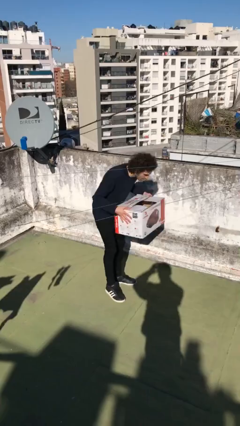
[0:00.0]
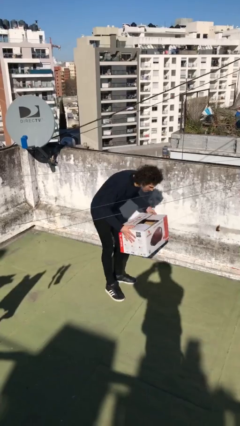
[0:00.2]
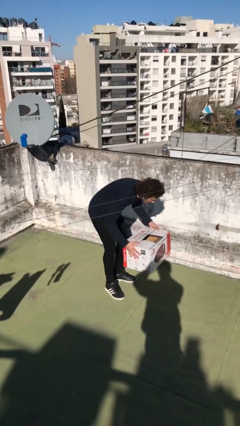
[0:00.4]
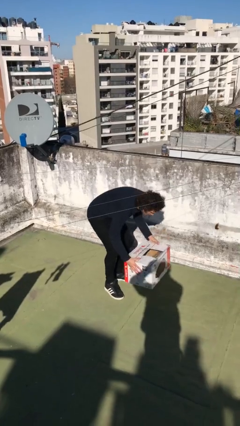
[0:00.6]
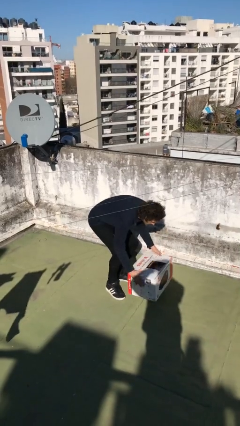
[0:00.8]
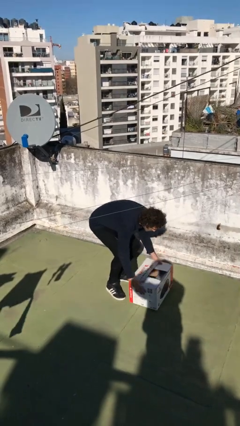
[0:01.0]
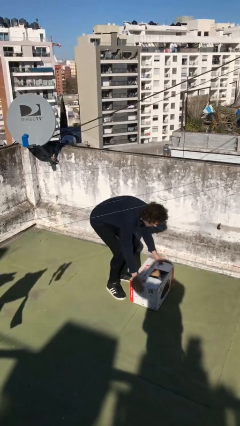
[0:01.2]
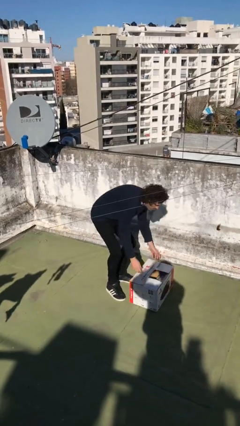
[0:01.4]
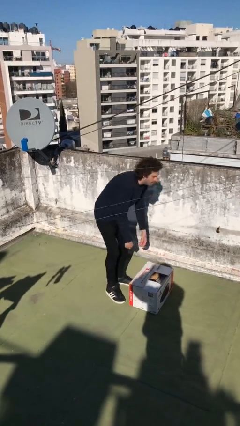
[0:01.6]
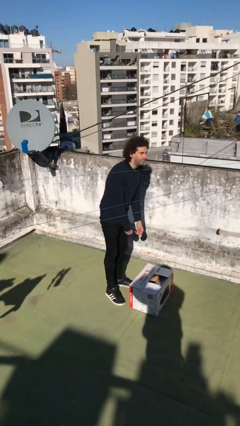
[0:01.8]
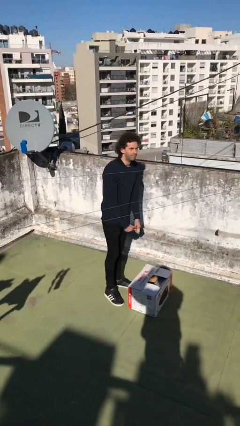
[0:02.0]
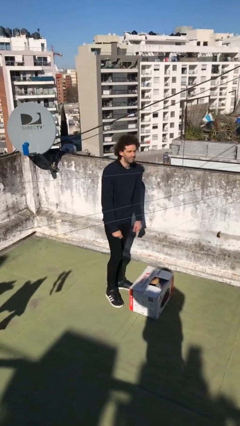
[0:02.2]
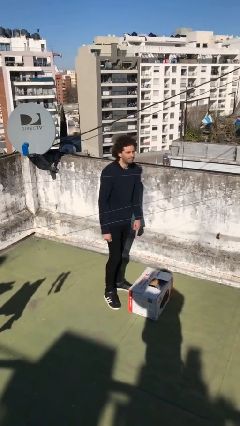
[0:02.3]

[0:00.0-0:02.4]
person puts down object on floor

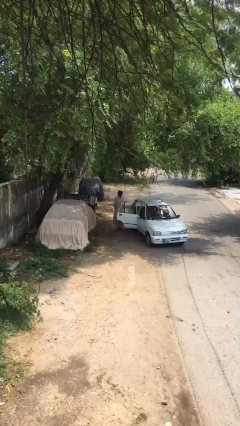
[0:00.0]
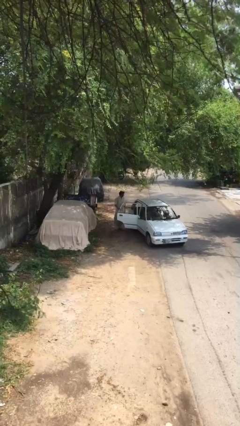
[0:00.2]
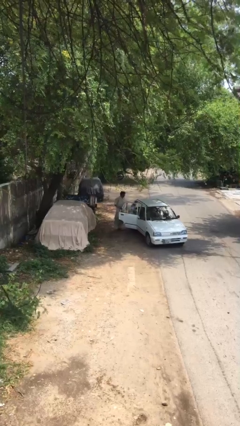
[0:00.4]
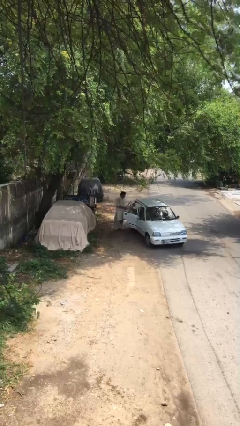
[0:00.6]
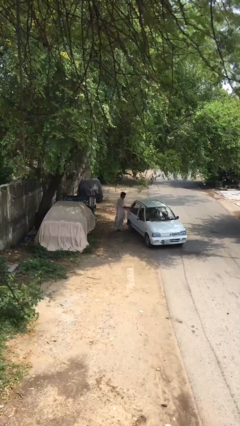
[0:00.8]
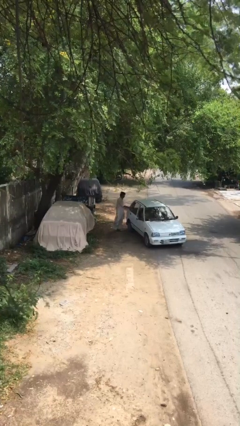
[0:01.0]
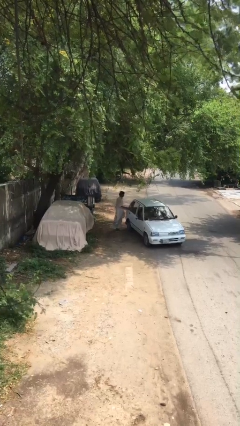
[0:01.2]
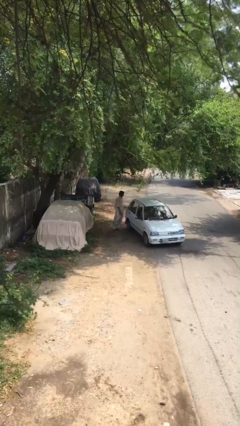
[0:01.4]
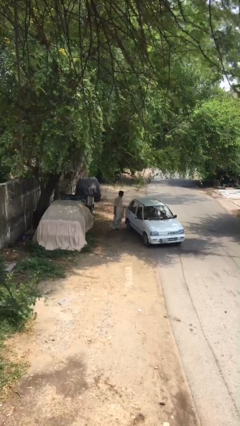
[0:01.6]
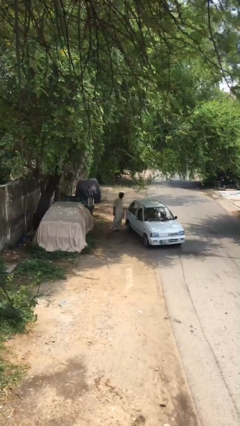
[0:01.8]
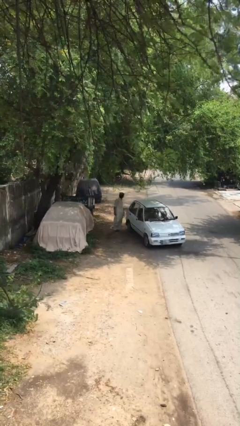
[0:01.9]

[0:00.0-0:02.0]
person closes car door

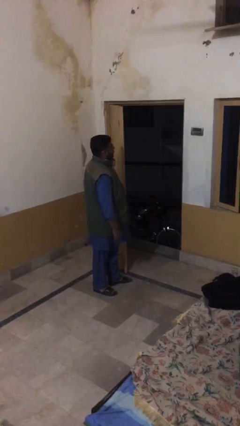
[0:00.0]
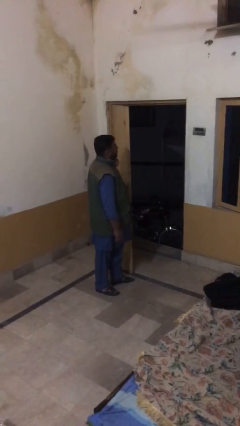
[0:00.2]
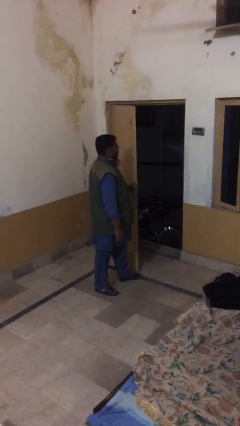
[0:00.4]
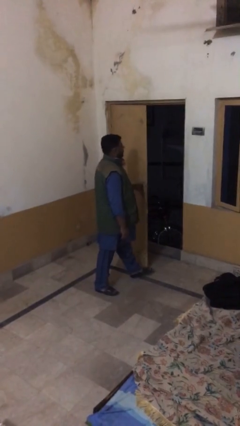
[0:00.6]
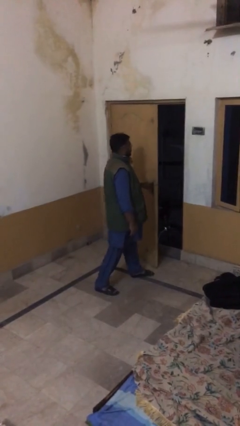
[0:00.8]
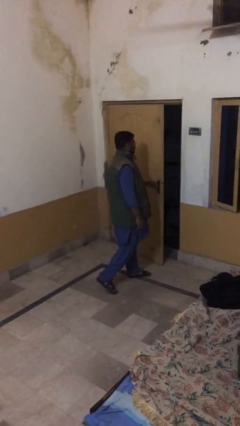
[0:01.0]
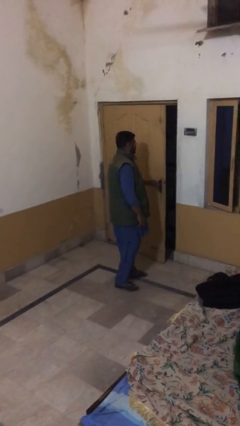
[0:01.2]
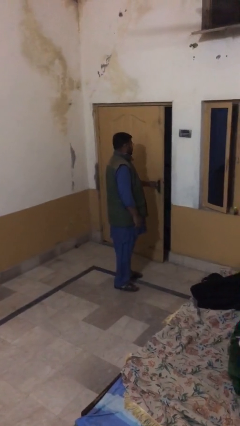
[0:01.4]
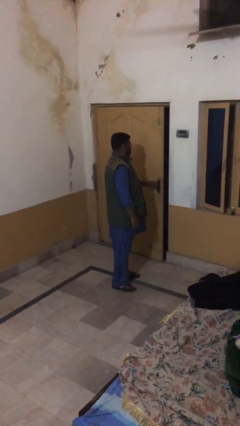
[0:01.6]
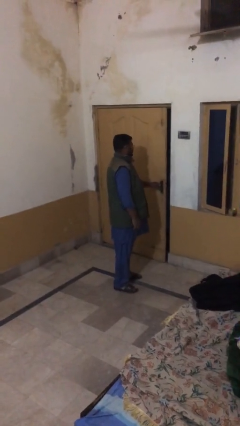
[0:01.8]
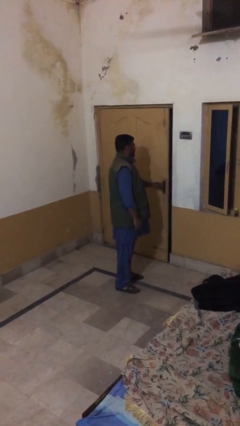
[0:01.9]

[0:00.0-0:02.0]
person closes facility door

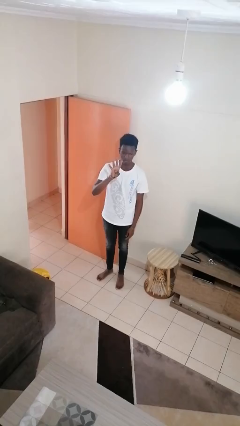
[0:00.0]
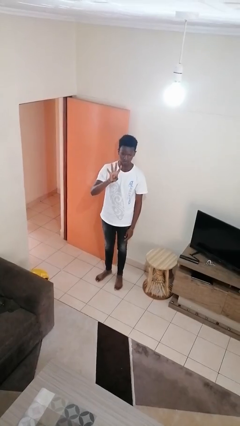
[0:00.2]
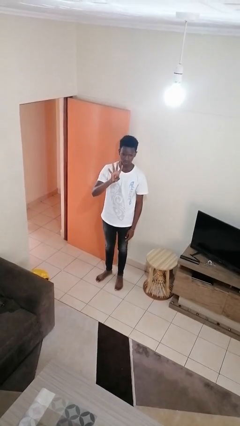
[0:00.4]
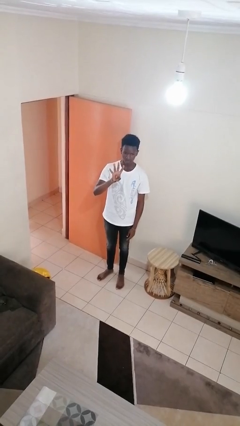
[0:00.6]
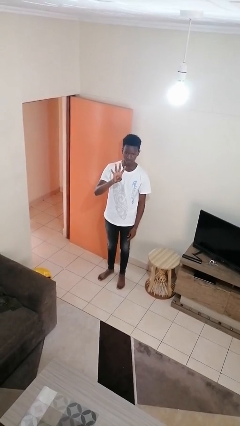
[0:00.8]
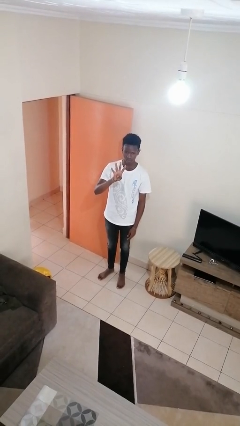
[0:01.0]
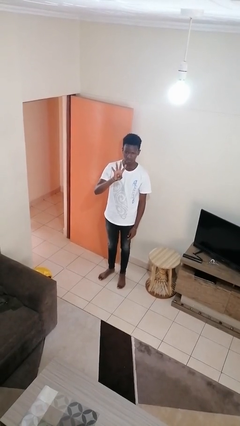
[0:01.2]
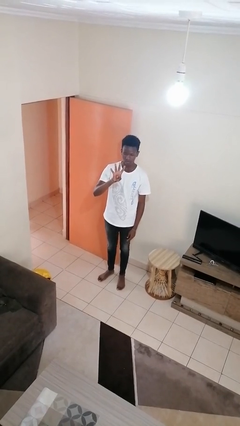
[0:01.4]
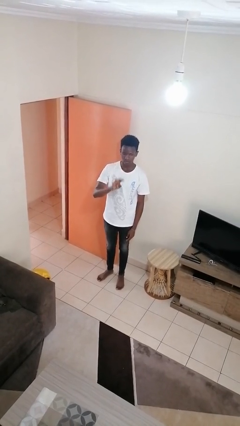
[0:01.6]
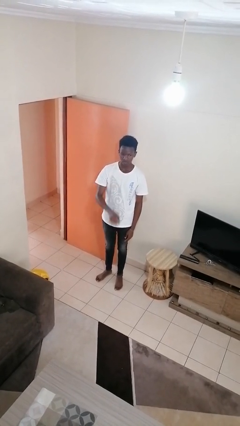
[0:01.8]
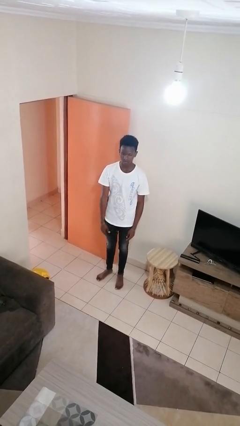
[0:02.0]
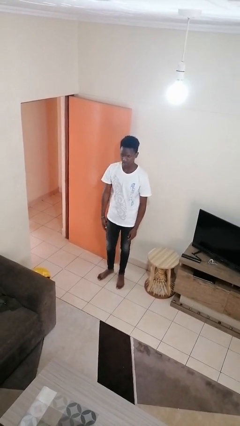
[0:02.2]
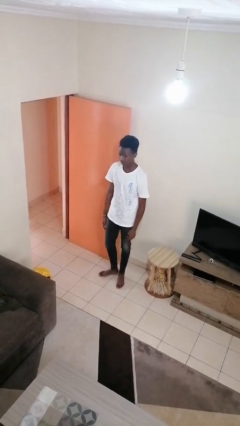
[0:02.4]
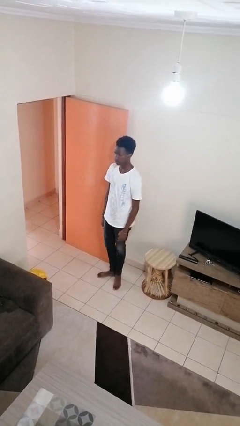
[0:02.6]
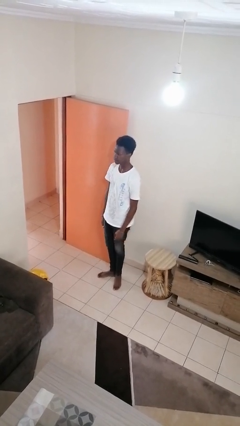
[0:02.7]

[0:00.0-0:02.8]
person gestures number four

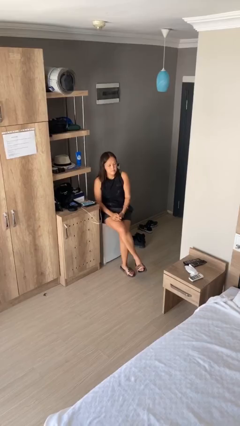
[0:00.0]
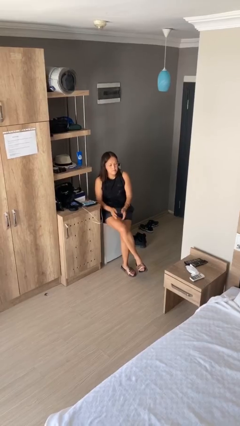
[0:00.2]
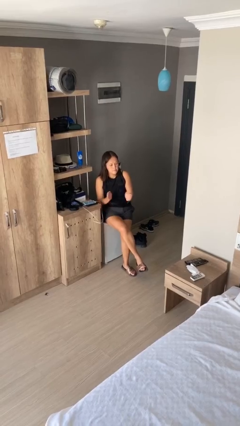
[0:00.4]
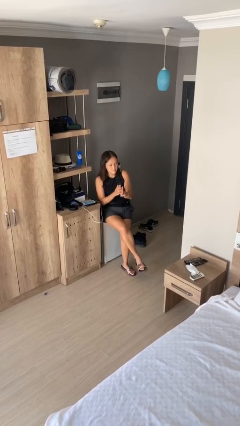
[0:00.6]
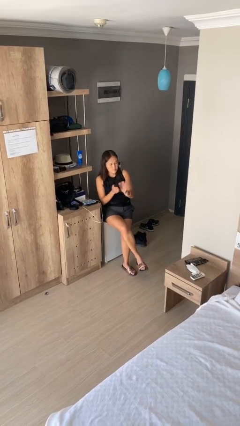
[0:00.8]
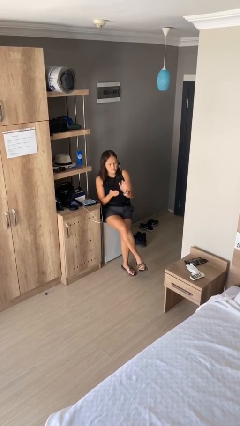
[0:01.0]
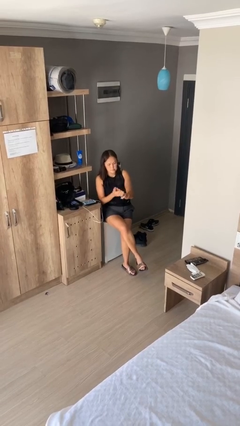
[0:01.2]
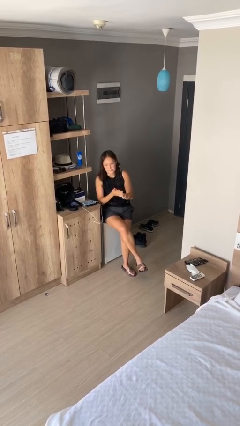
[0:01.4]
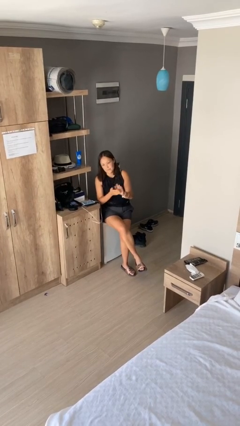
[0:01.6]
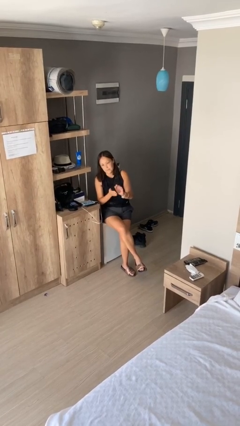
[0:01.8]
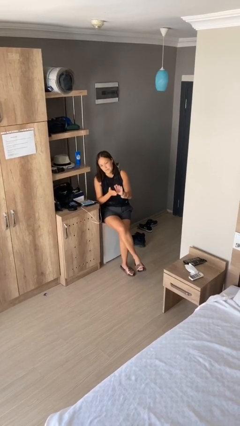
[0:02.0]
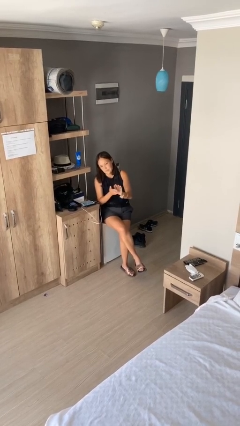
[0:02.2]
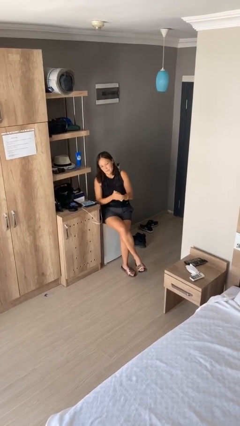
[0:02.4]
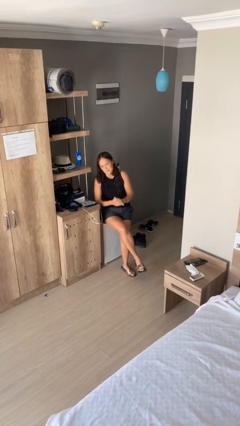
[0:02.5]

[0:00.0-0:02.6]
person claps hands

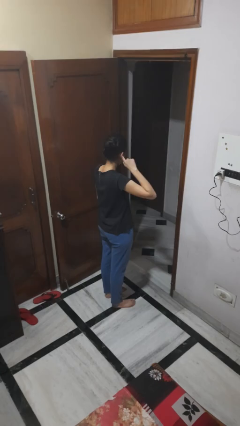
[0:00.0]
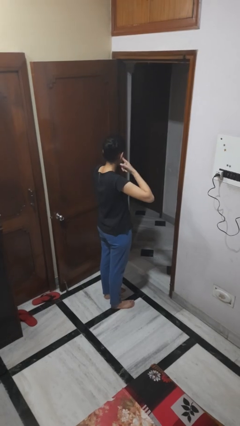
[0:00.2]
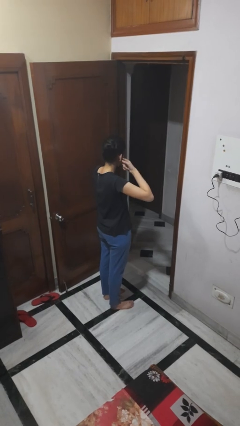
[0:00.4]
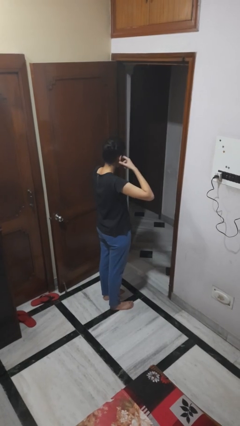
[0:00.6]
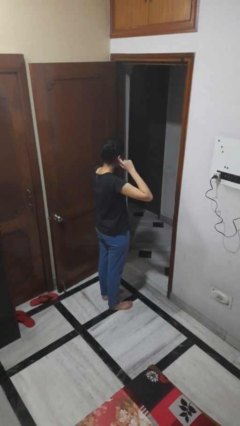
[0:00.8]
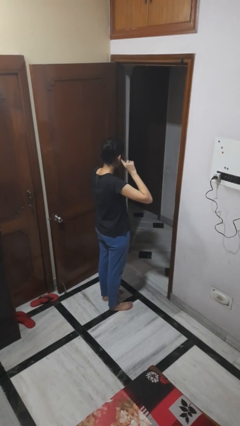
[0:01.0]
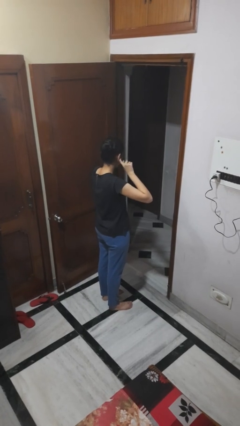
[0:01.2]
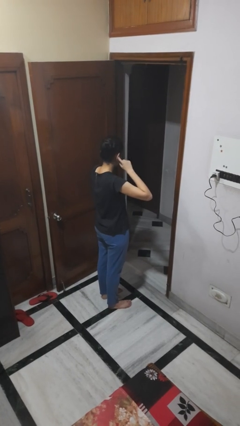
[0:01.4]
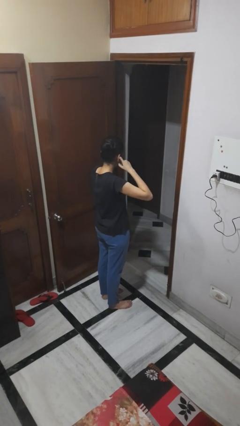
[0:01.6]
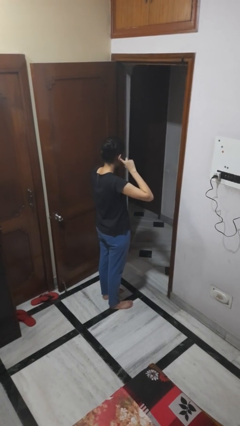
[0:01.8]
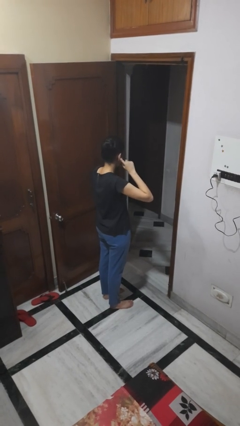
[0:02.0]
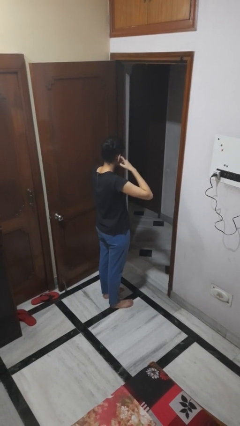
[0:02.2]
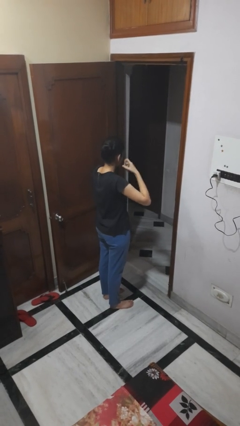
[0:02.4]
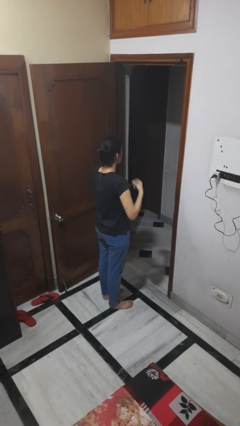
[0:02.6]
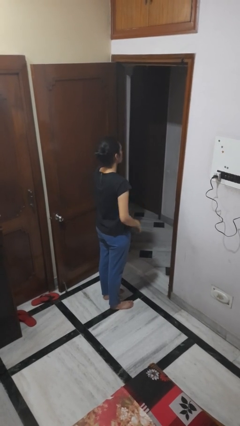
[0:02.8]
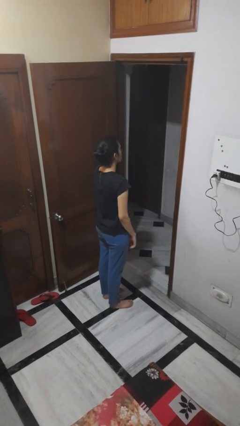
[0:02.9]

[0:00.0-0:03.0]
person puts fingers in ear

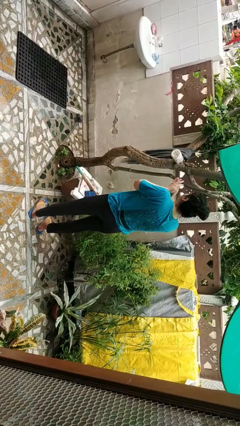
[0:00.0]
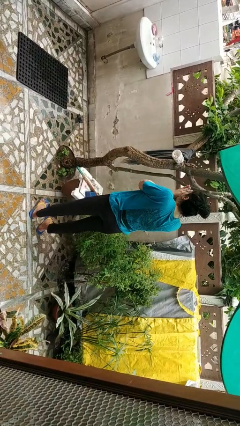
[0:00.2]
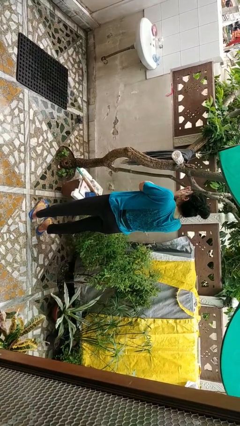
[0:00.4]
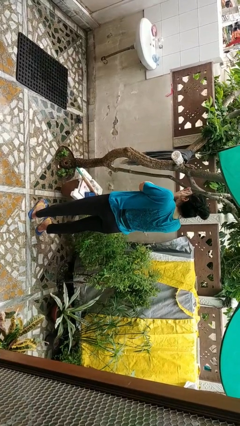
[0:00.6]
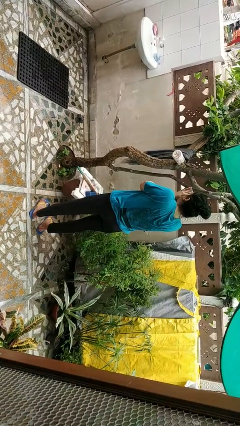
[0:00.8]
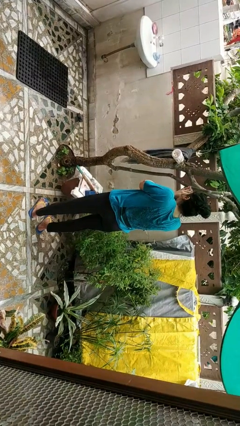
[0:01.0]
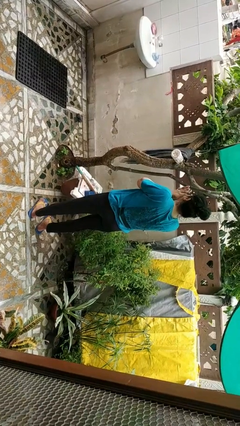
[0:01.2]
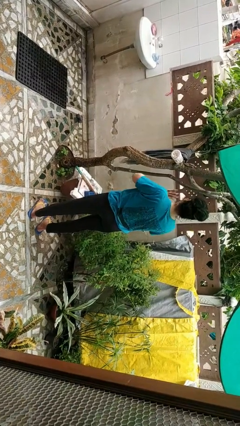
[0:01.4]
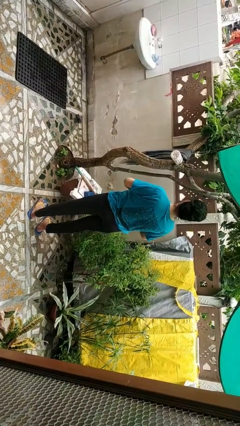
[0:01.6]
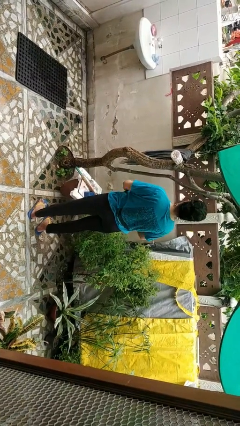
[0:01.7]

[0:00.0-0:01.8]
person blows into hands

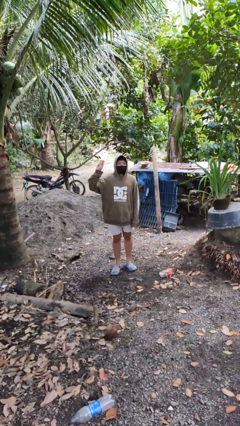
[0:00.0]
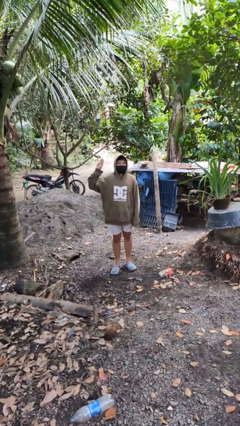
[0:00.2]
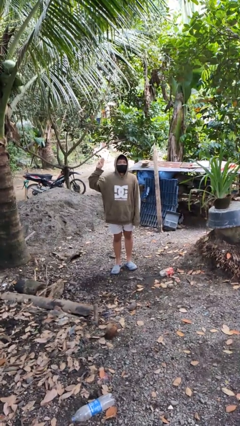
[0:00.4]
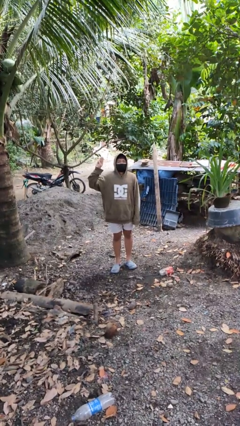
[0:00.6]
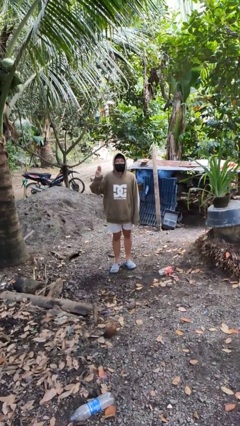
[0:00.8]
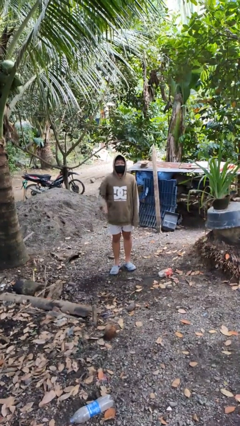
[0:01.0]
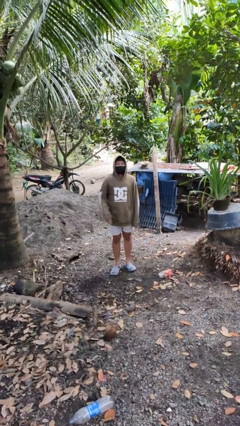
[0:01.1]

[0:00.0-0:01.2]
person gestures number three
